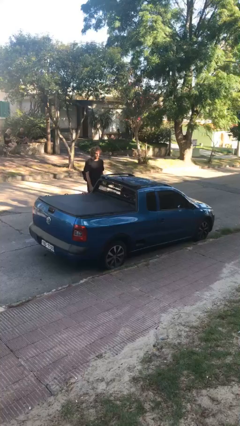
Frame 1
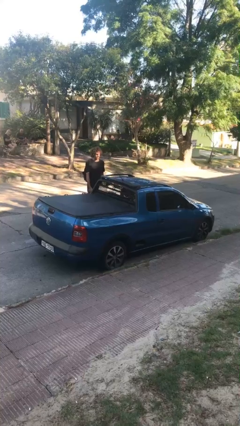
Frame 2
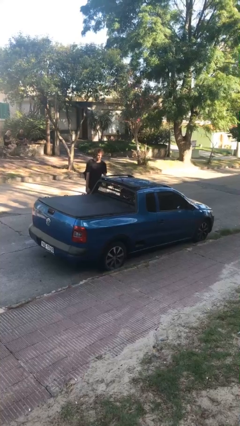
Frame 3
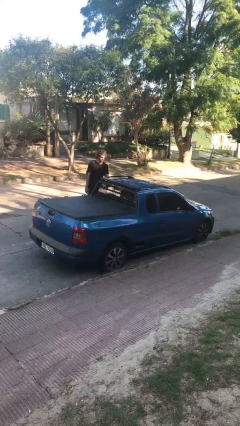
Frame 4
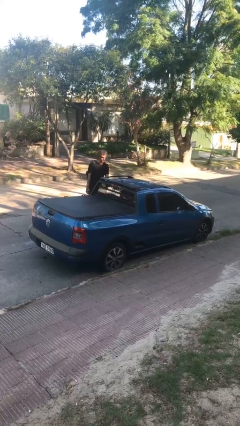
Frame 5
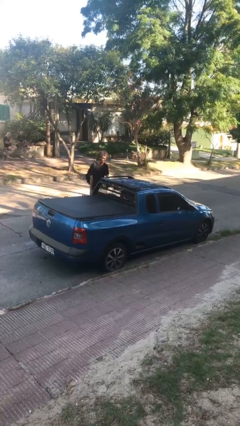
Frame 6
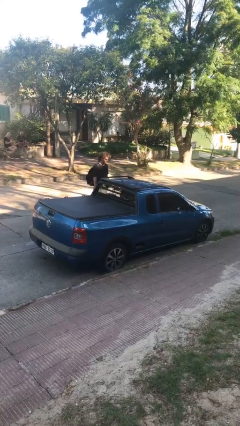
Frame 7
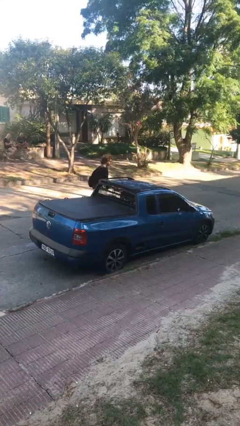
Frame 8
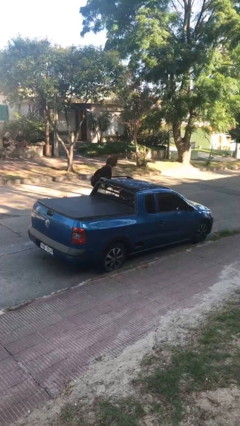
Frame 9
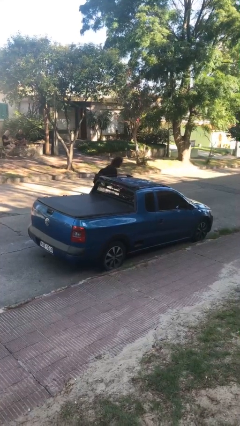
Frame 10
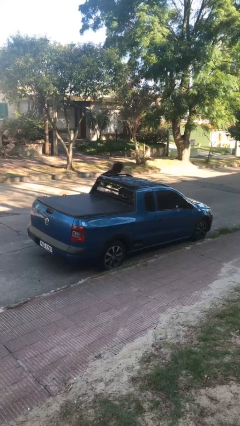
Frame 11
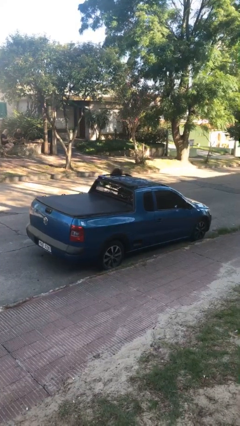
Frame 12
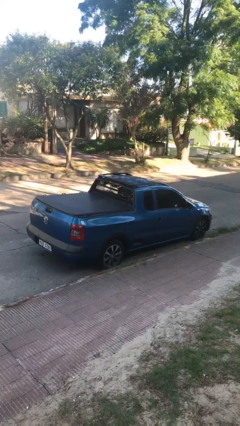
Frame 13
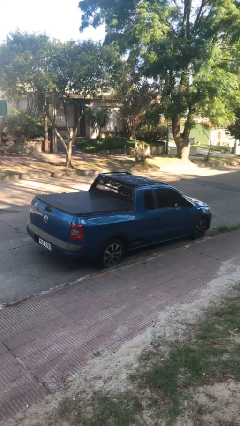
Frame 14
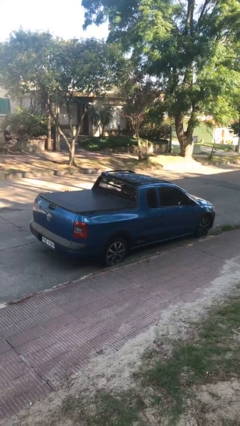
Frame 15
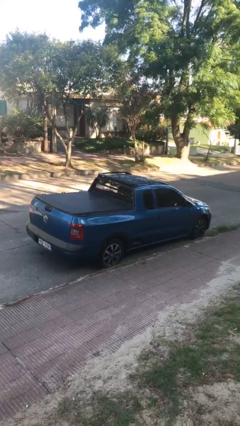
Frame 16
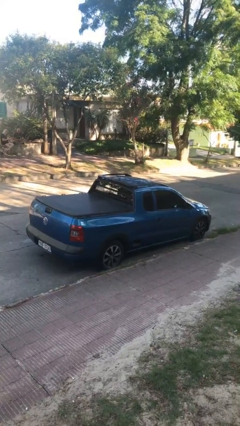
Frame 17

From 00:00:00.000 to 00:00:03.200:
car picks up person

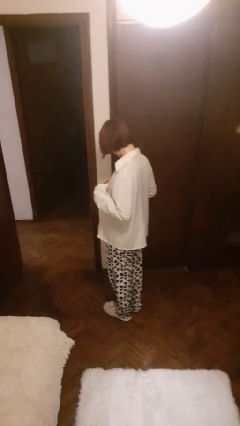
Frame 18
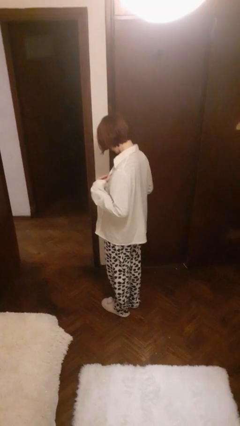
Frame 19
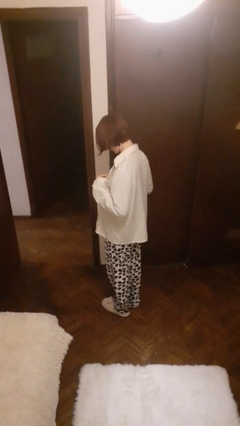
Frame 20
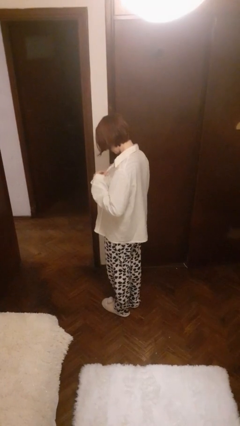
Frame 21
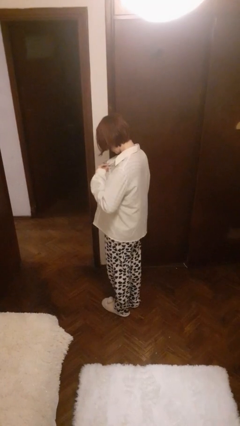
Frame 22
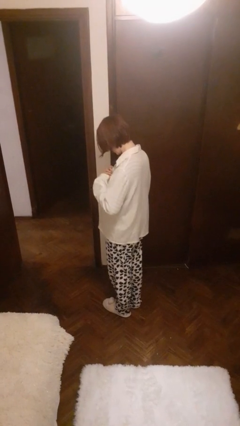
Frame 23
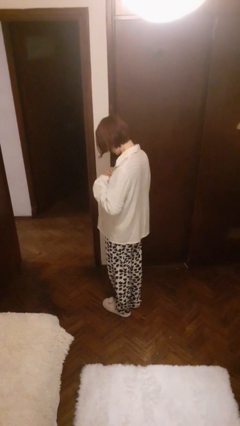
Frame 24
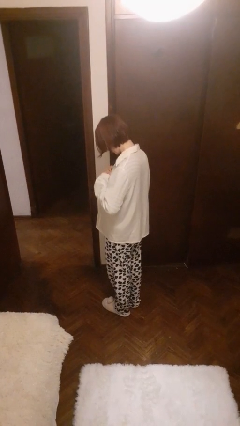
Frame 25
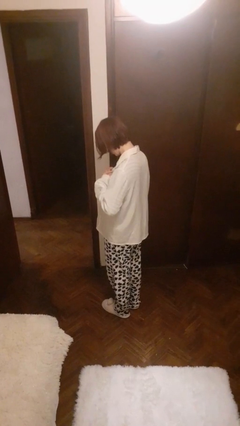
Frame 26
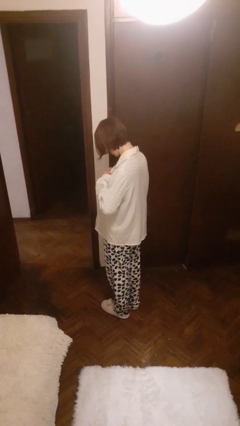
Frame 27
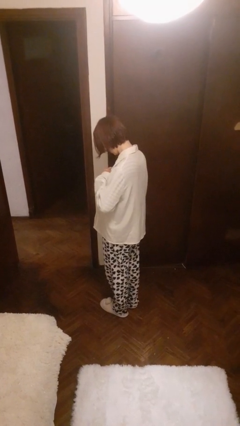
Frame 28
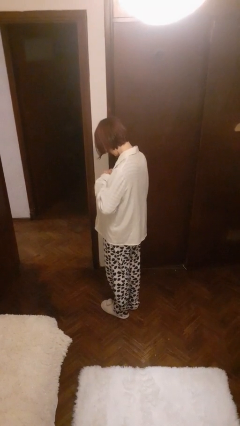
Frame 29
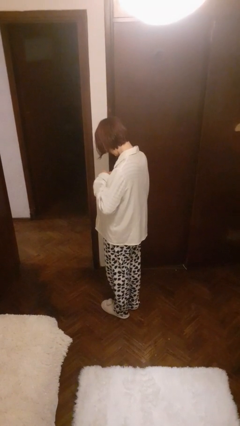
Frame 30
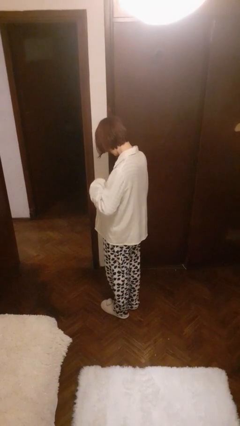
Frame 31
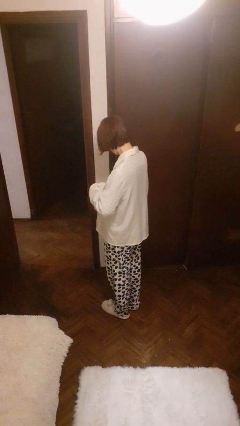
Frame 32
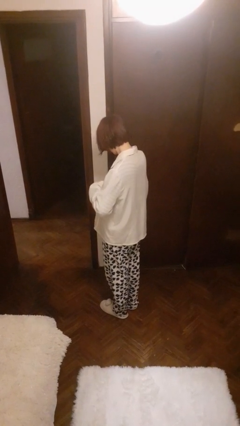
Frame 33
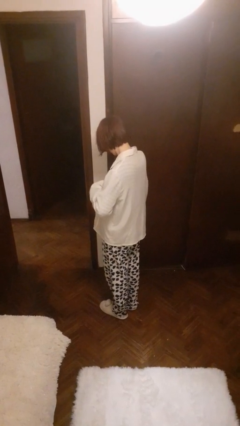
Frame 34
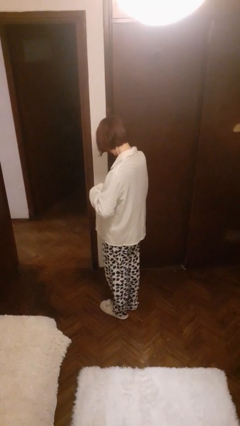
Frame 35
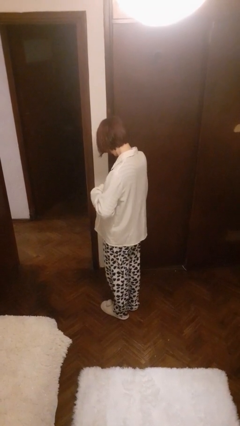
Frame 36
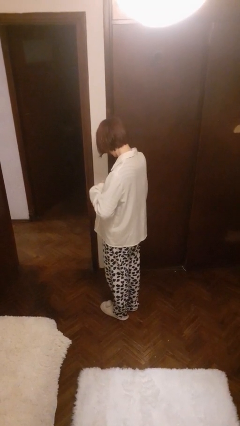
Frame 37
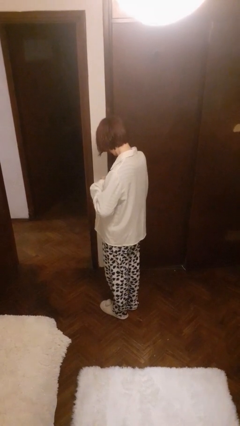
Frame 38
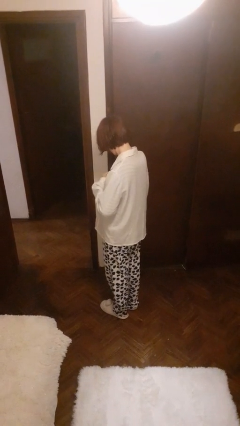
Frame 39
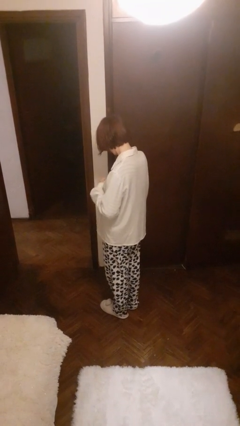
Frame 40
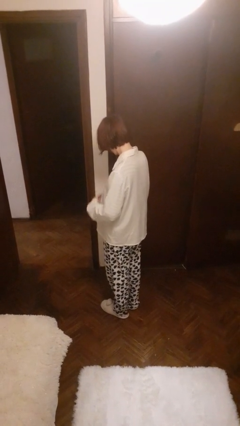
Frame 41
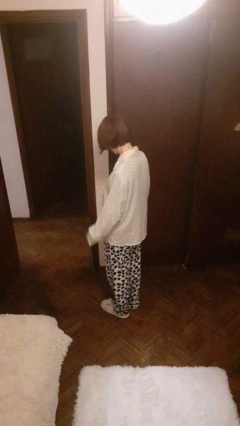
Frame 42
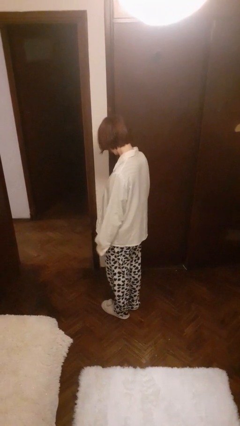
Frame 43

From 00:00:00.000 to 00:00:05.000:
person buttons shirt

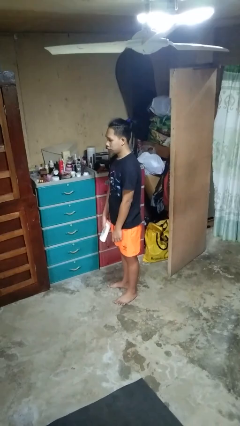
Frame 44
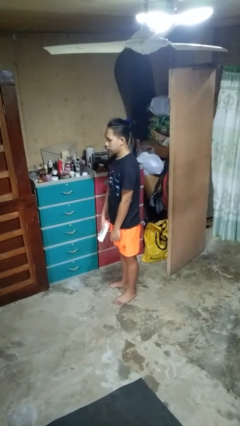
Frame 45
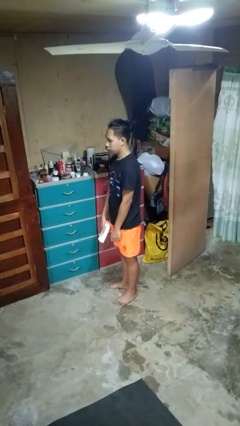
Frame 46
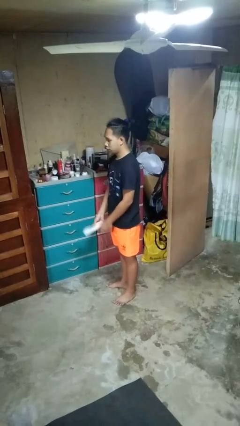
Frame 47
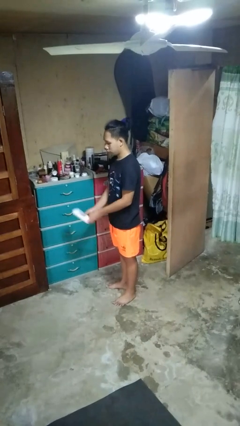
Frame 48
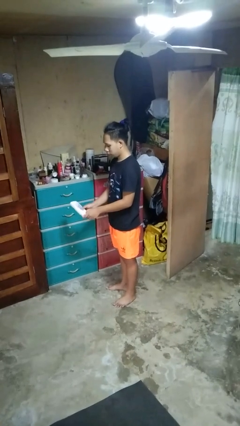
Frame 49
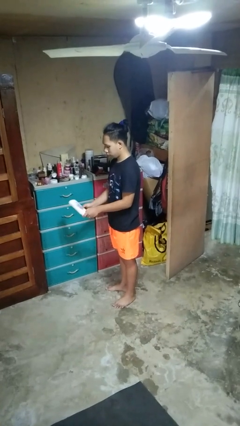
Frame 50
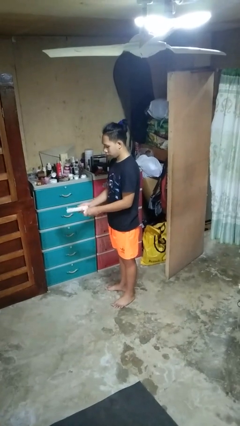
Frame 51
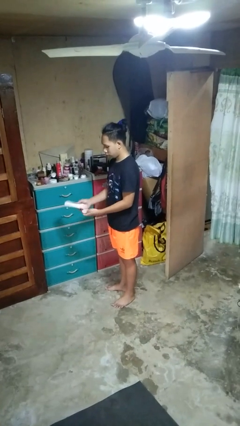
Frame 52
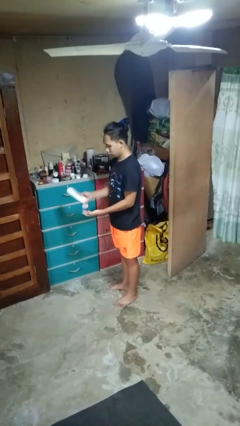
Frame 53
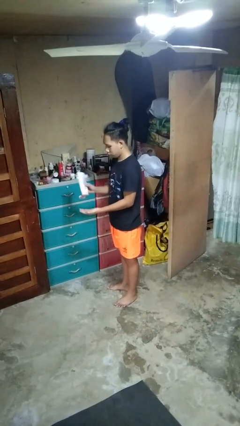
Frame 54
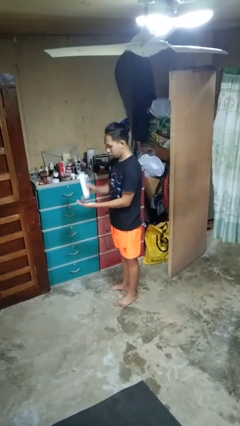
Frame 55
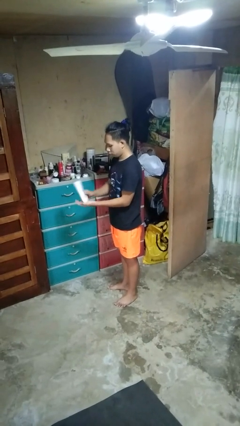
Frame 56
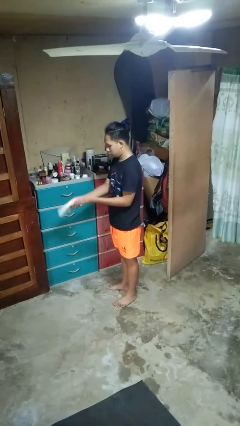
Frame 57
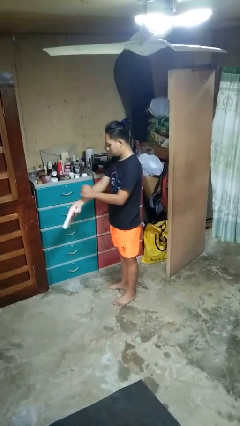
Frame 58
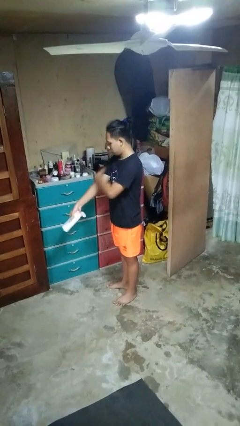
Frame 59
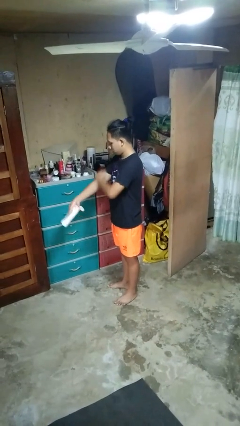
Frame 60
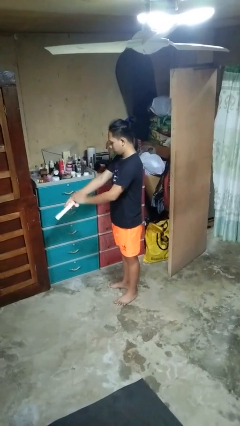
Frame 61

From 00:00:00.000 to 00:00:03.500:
person applies sunscreen

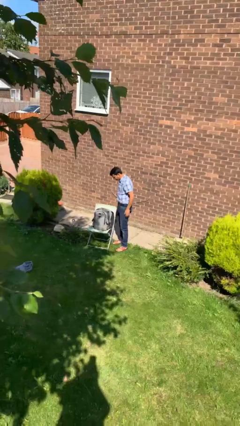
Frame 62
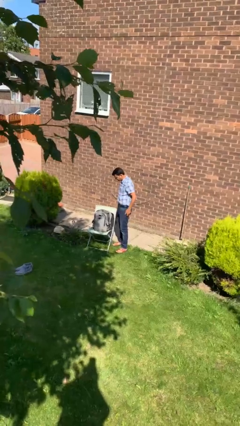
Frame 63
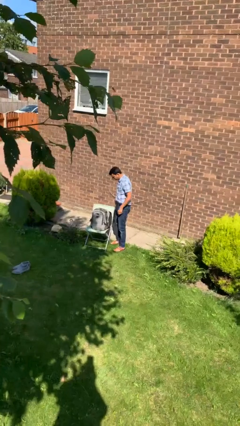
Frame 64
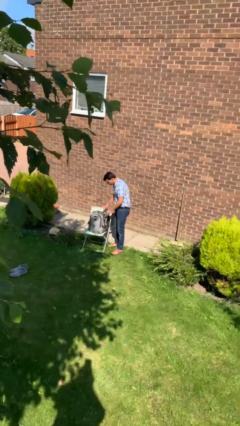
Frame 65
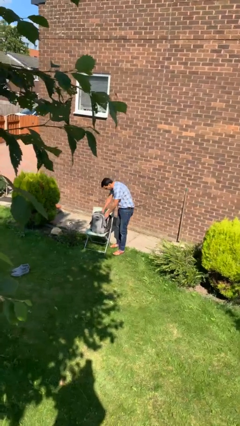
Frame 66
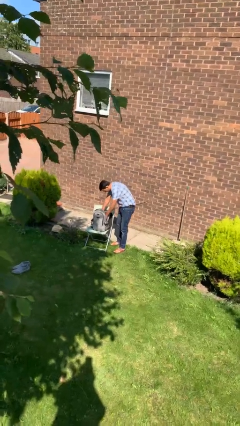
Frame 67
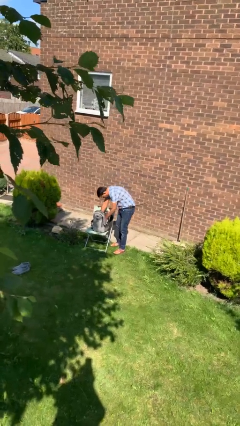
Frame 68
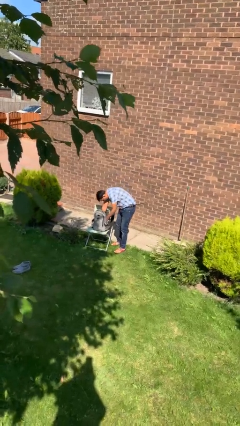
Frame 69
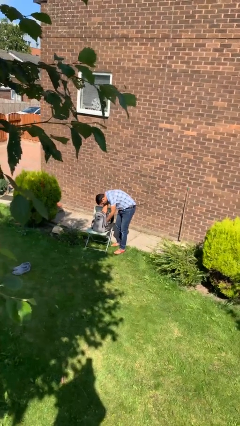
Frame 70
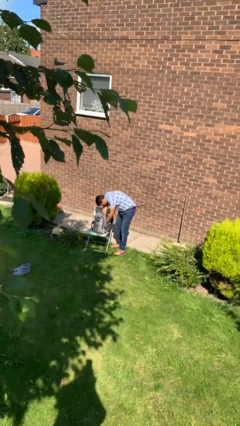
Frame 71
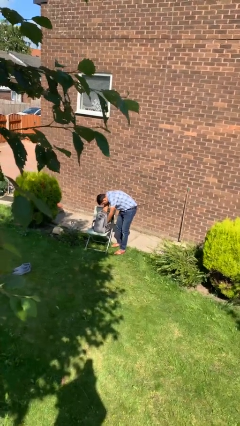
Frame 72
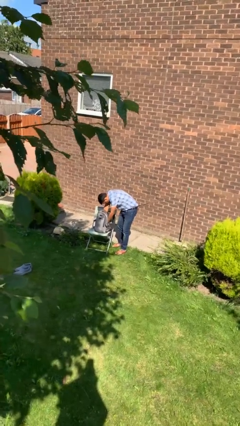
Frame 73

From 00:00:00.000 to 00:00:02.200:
person searches in backpack

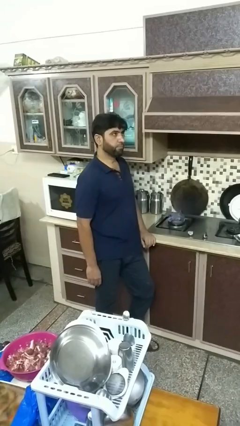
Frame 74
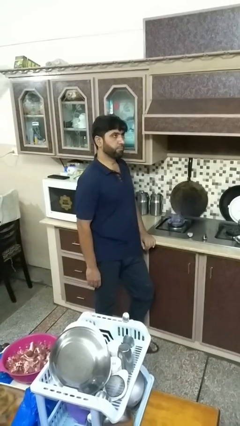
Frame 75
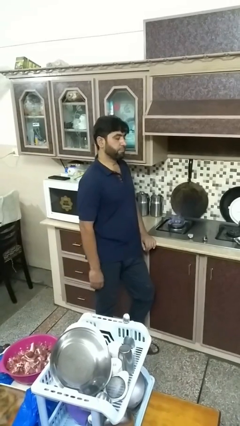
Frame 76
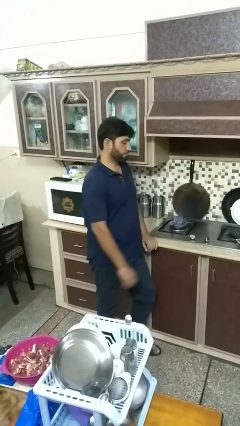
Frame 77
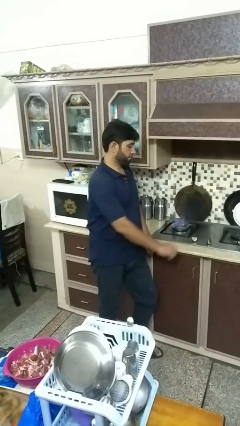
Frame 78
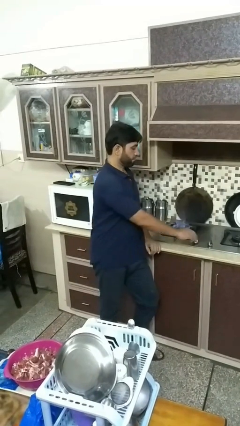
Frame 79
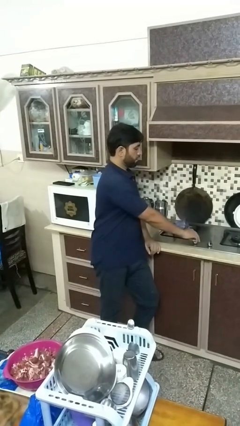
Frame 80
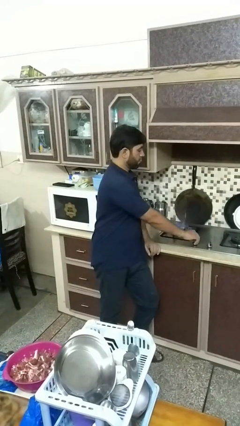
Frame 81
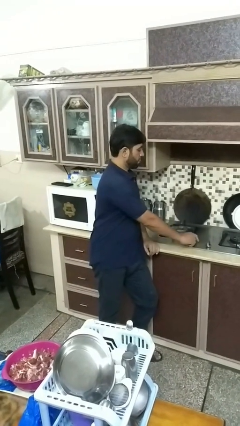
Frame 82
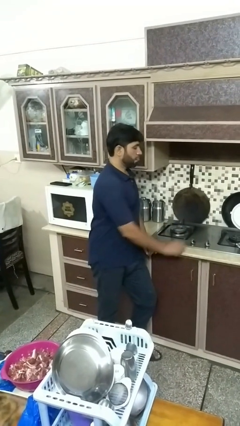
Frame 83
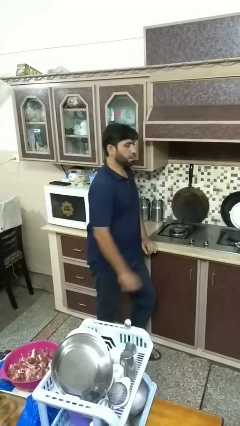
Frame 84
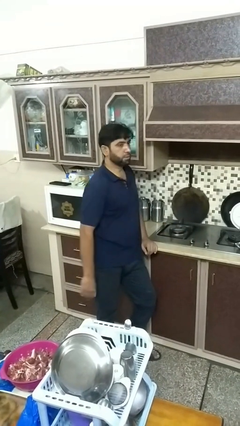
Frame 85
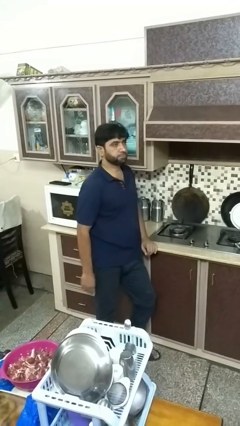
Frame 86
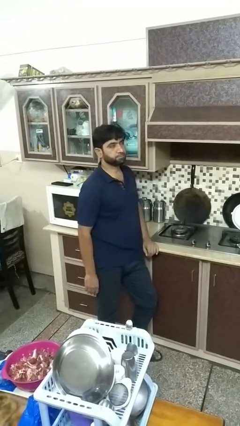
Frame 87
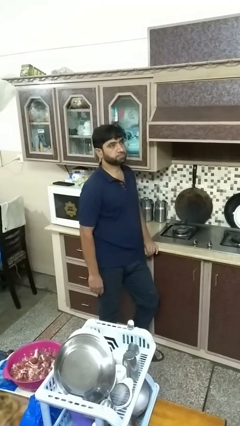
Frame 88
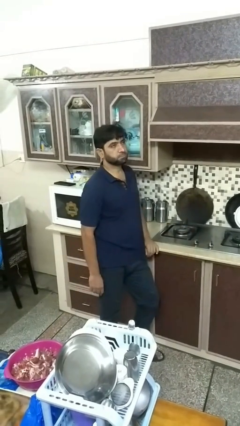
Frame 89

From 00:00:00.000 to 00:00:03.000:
person turns off stovetop

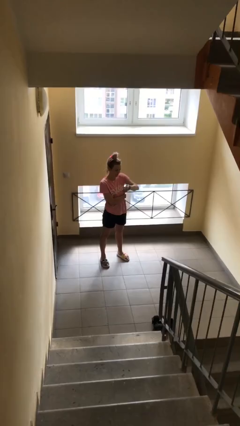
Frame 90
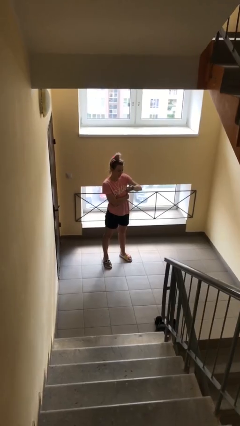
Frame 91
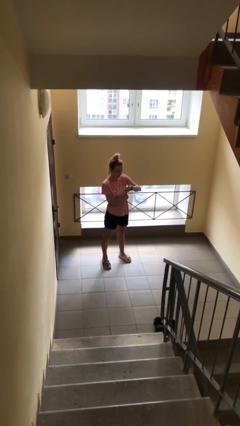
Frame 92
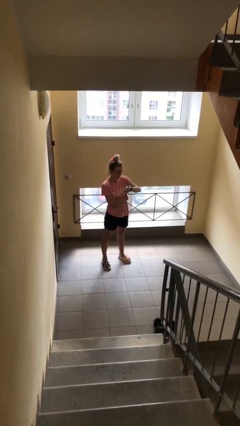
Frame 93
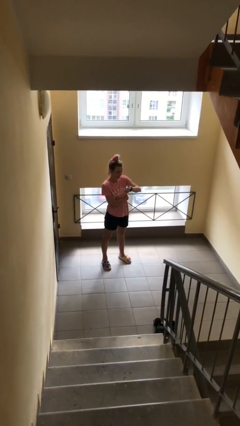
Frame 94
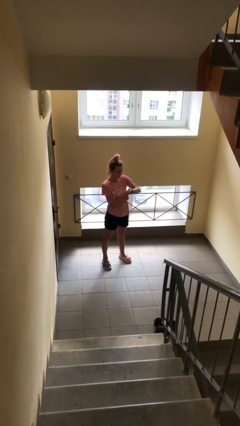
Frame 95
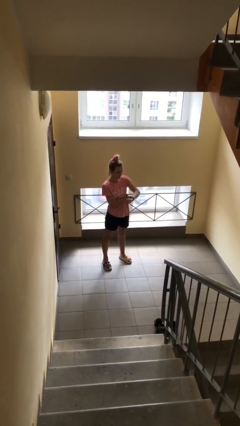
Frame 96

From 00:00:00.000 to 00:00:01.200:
person looks at wristwatch
